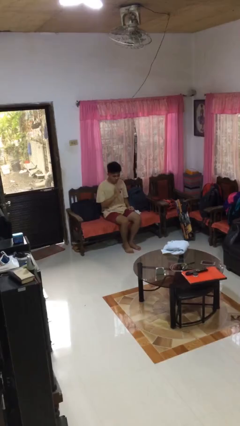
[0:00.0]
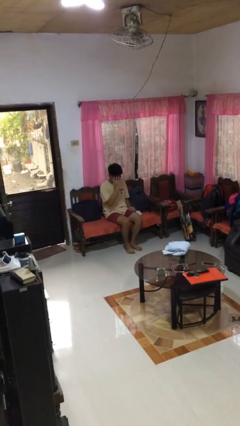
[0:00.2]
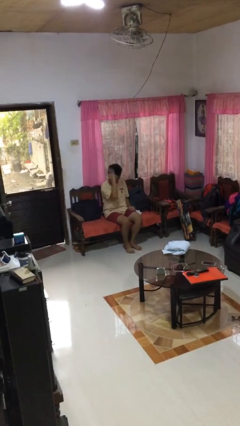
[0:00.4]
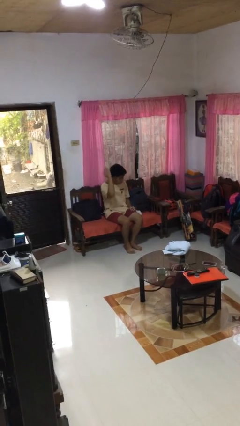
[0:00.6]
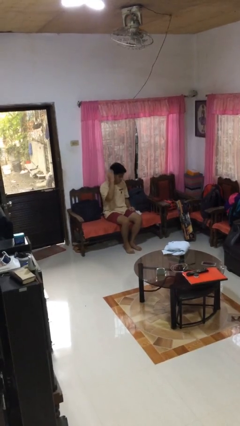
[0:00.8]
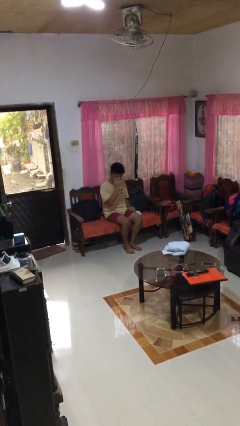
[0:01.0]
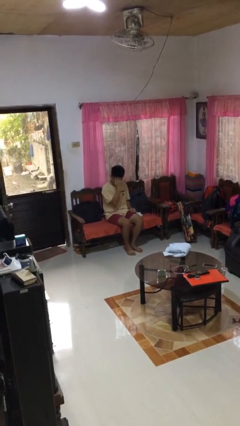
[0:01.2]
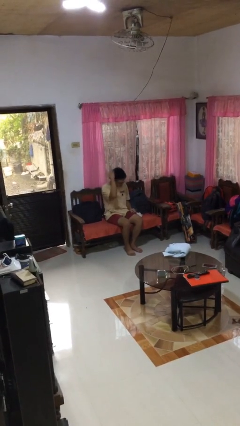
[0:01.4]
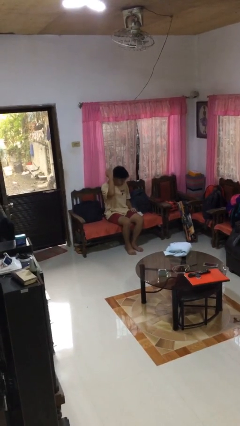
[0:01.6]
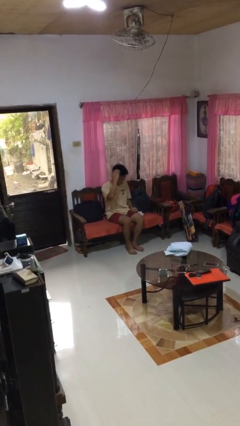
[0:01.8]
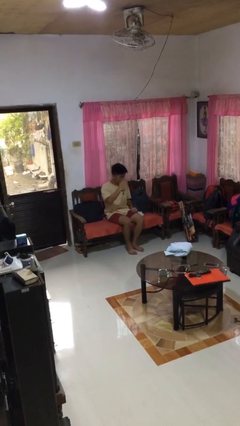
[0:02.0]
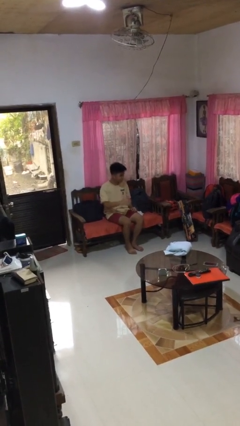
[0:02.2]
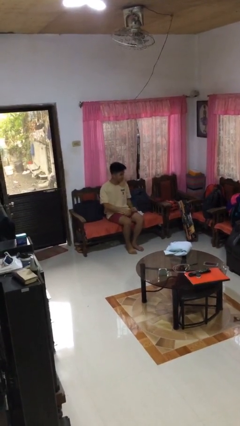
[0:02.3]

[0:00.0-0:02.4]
person strokes hair

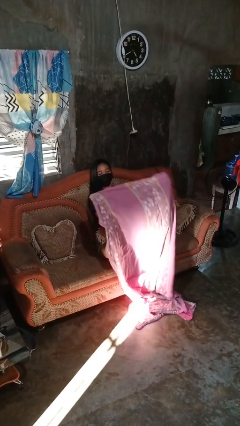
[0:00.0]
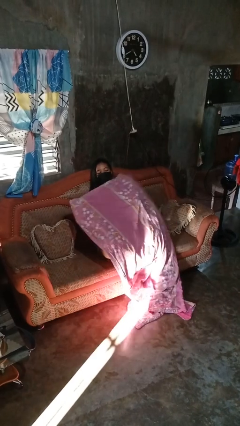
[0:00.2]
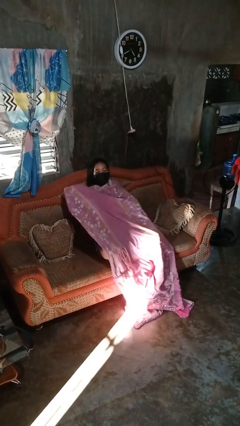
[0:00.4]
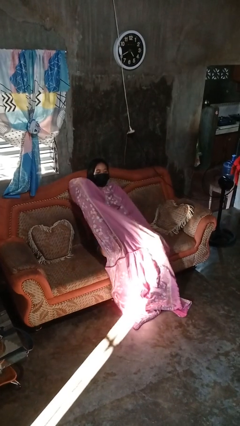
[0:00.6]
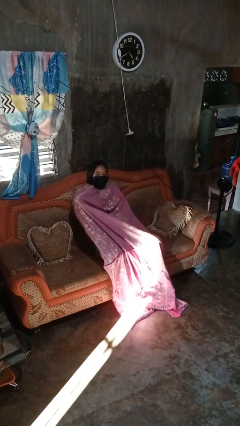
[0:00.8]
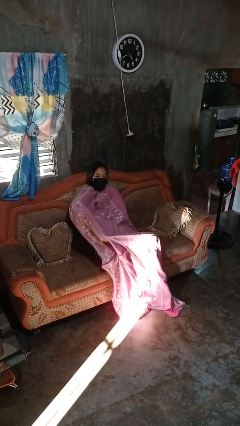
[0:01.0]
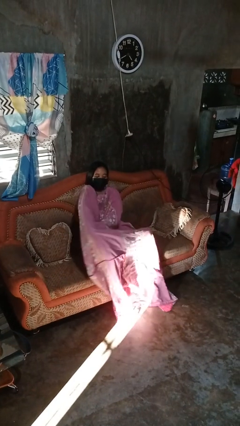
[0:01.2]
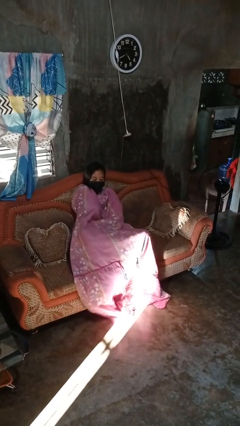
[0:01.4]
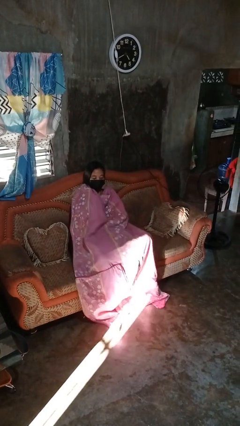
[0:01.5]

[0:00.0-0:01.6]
person covers with blanket

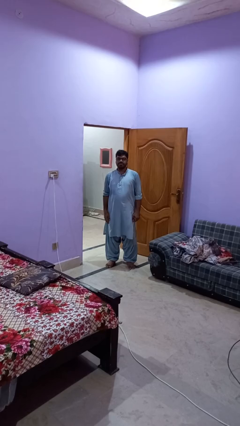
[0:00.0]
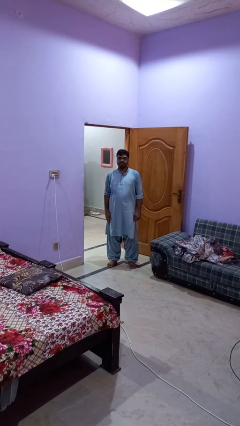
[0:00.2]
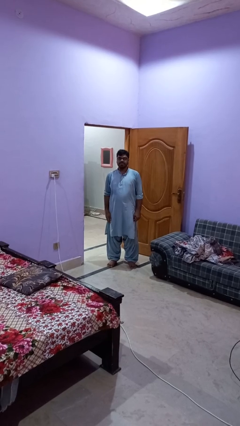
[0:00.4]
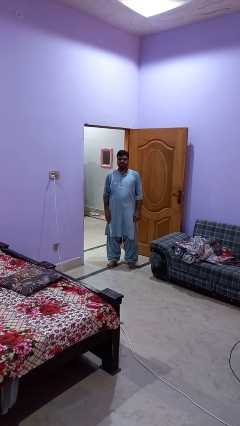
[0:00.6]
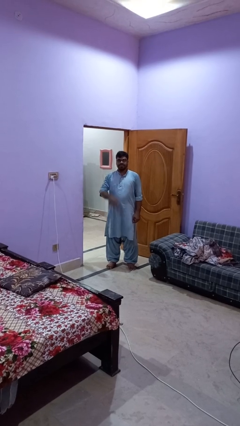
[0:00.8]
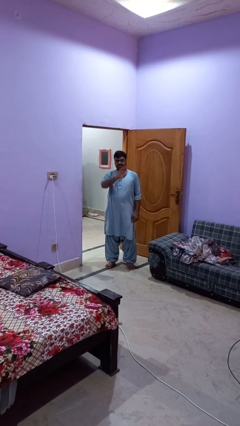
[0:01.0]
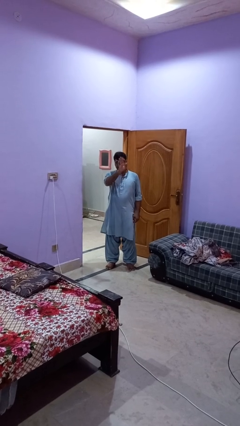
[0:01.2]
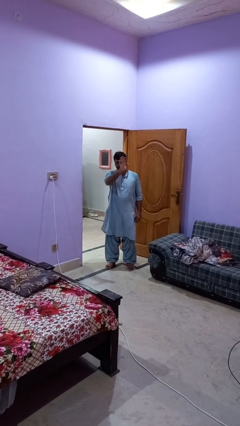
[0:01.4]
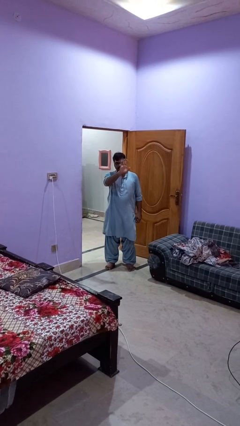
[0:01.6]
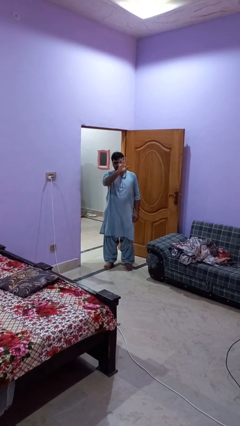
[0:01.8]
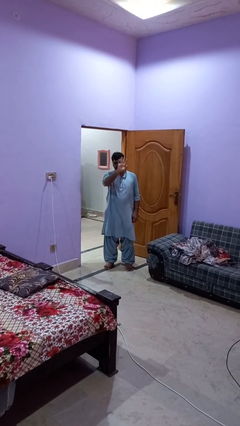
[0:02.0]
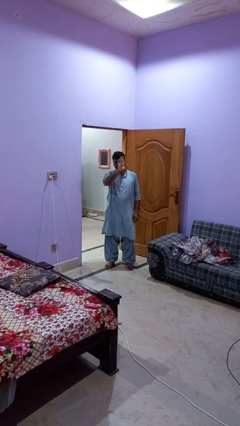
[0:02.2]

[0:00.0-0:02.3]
person waves at person

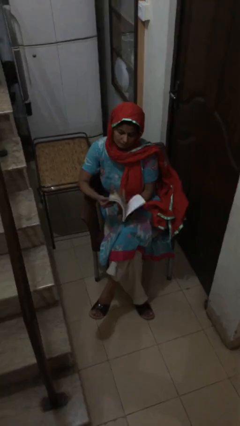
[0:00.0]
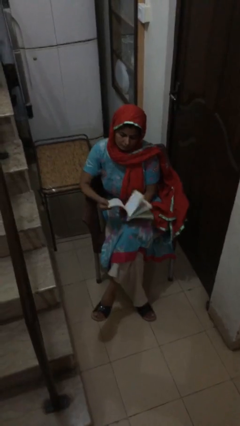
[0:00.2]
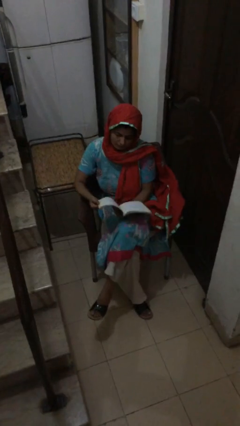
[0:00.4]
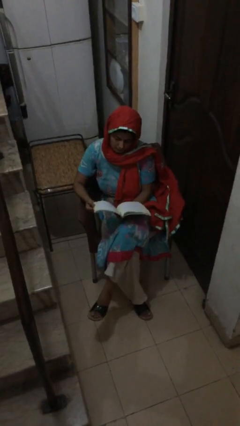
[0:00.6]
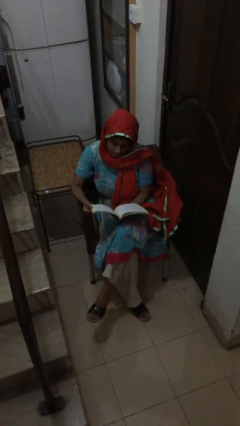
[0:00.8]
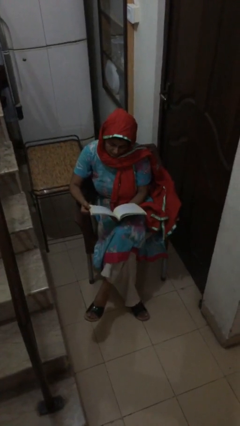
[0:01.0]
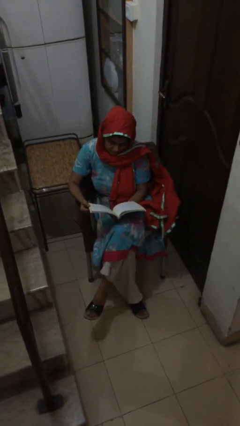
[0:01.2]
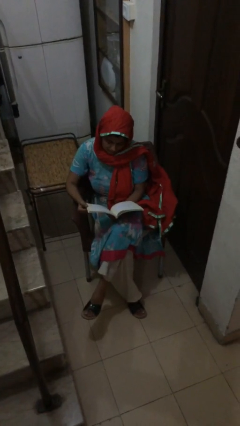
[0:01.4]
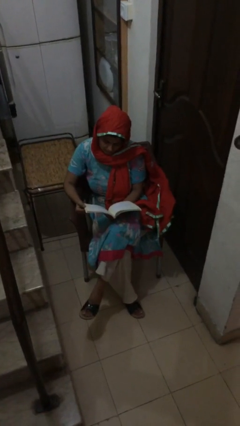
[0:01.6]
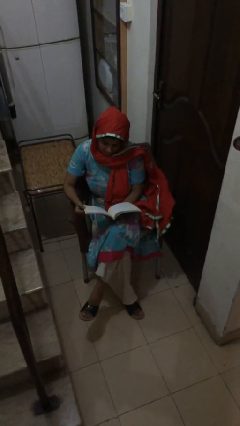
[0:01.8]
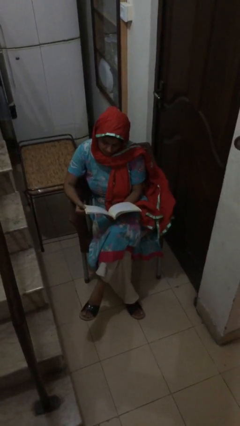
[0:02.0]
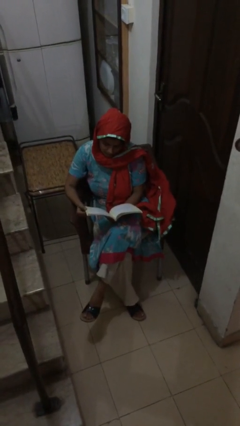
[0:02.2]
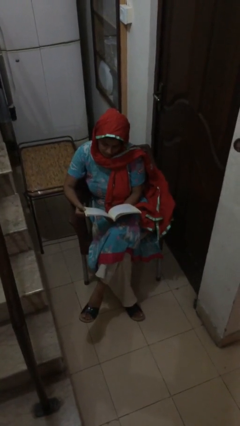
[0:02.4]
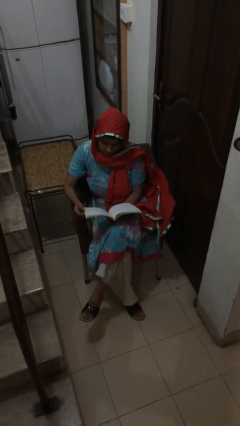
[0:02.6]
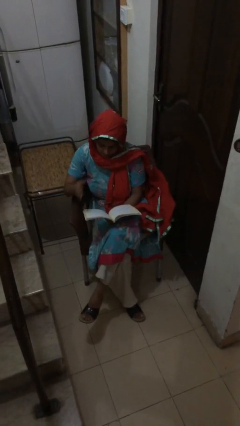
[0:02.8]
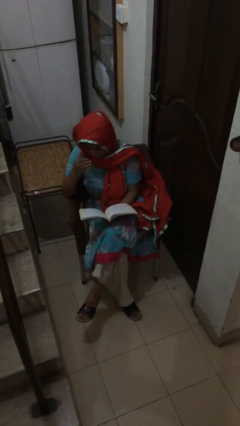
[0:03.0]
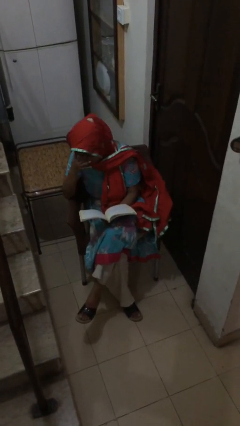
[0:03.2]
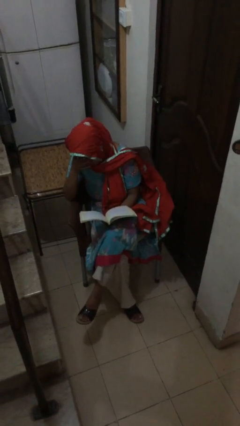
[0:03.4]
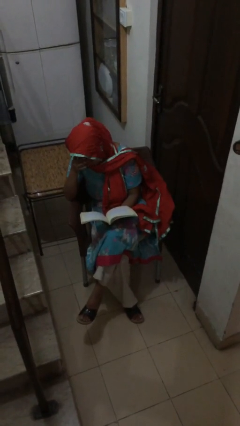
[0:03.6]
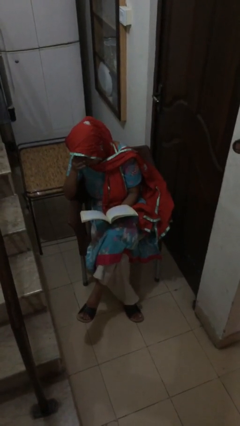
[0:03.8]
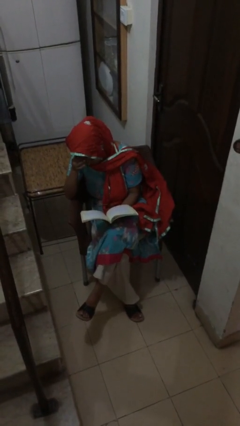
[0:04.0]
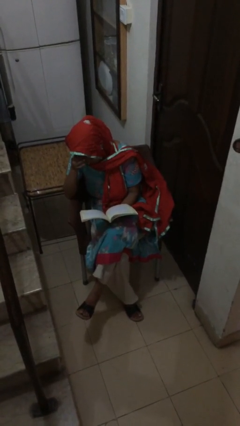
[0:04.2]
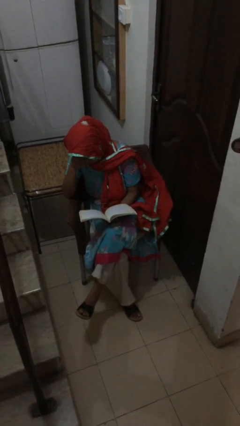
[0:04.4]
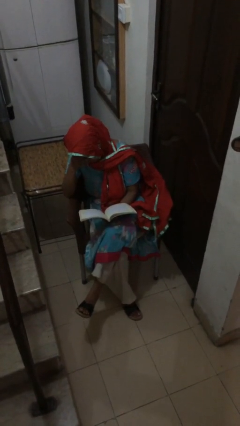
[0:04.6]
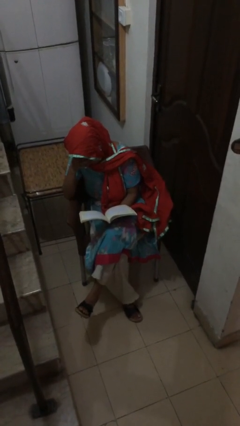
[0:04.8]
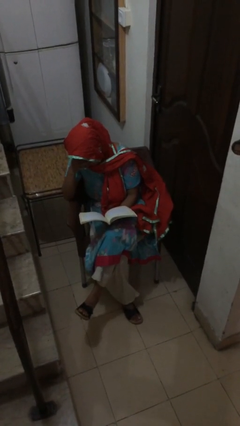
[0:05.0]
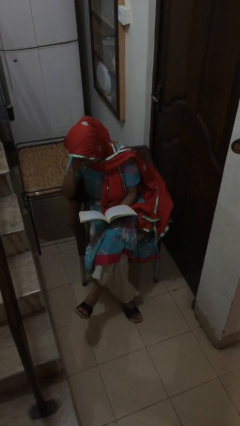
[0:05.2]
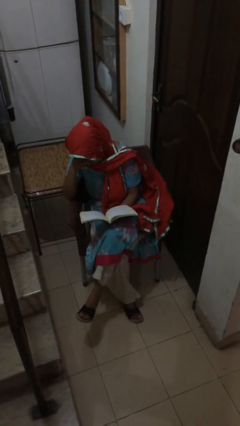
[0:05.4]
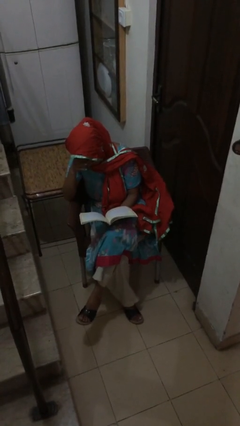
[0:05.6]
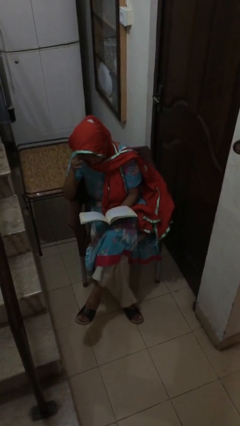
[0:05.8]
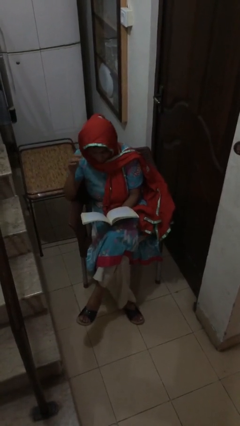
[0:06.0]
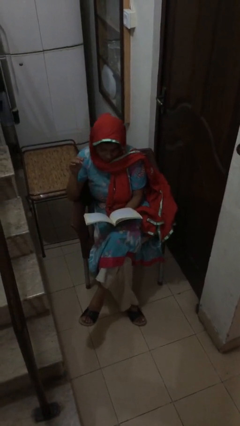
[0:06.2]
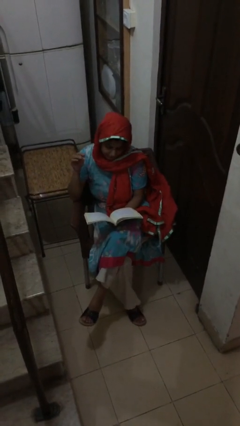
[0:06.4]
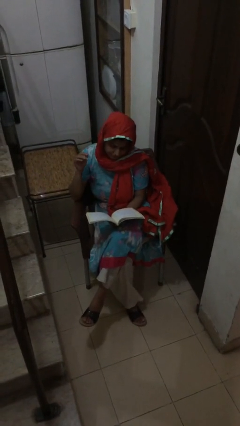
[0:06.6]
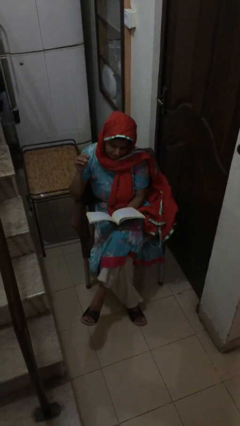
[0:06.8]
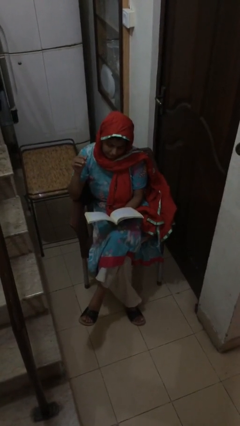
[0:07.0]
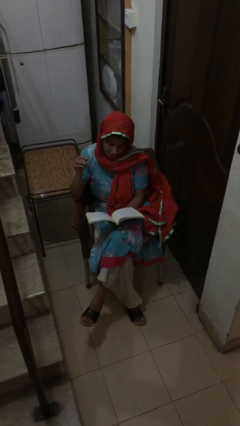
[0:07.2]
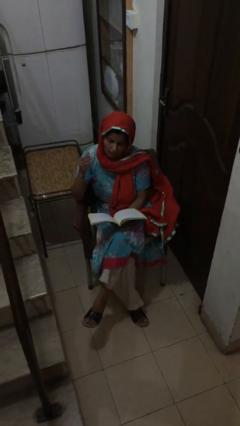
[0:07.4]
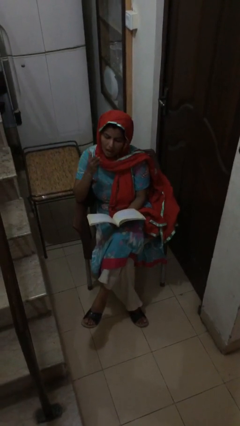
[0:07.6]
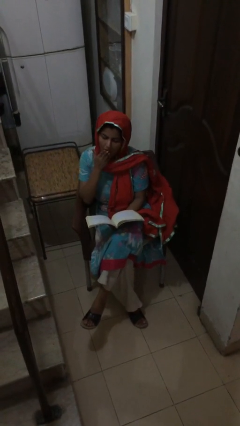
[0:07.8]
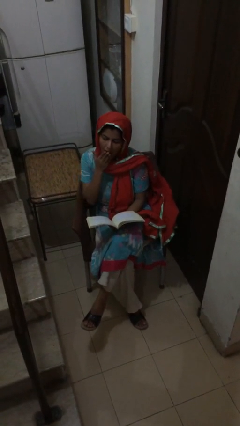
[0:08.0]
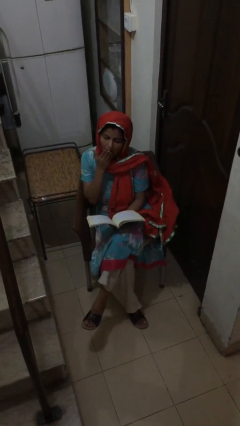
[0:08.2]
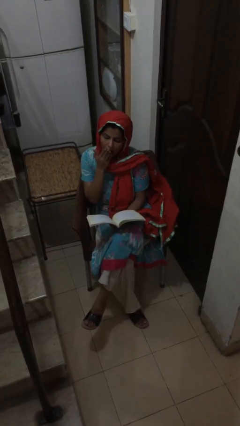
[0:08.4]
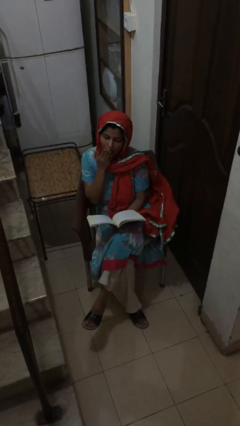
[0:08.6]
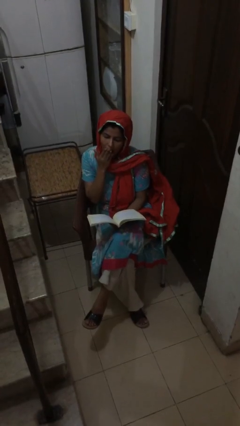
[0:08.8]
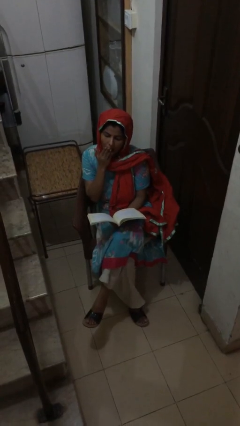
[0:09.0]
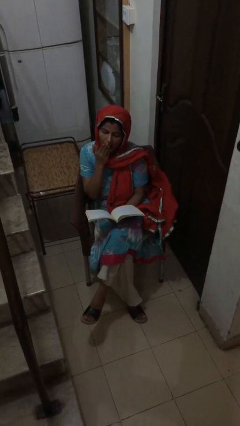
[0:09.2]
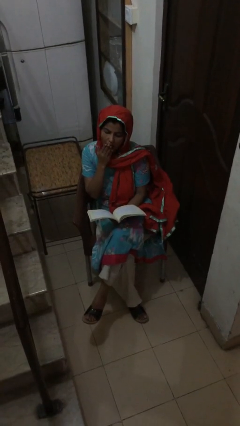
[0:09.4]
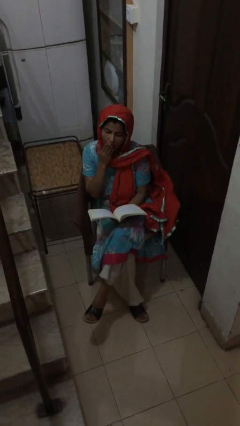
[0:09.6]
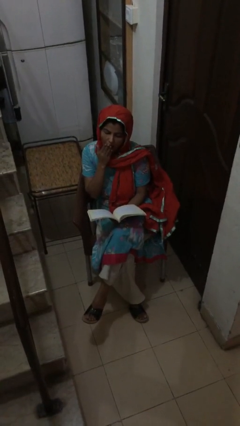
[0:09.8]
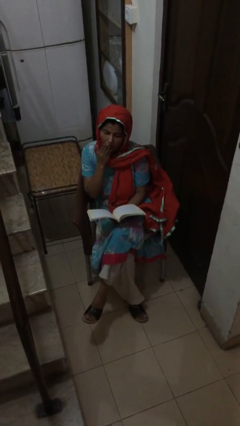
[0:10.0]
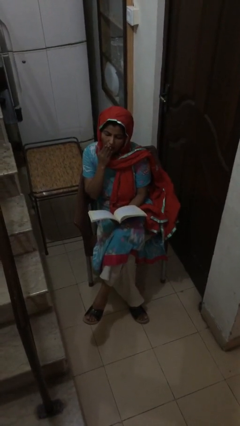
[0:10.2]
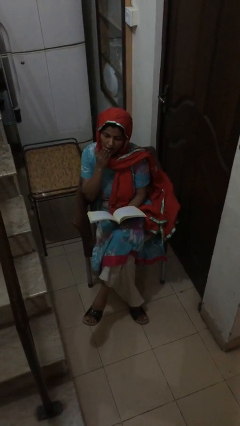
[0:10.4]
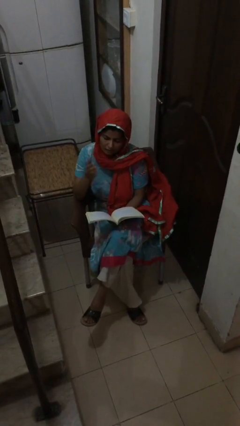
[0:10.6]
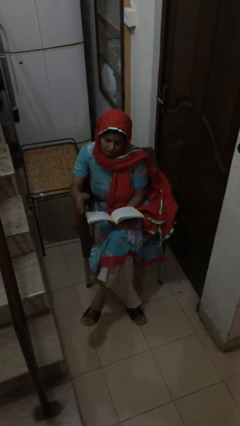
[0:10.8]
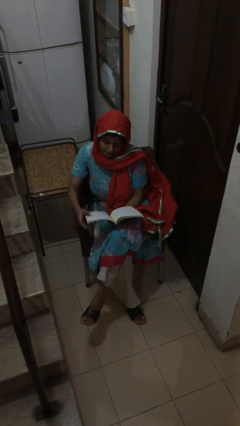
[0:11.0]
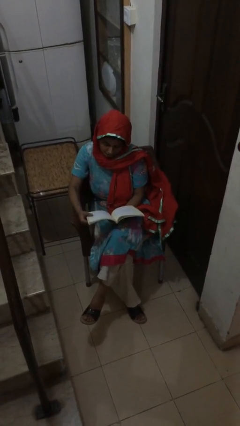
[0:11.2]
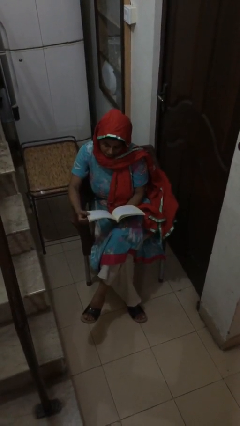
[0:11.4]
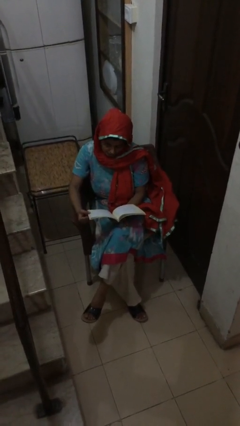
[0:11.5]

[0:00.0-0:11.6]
person reads document
